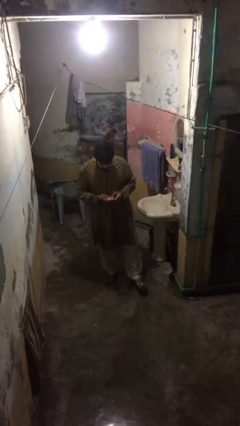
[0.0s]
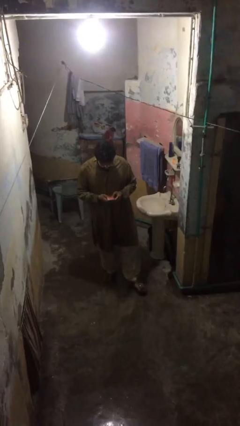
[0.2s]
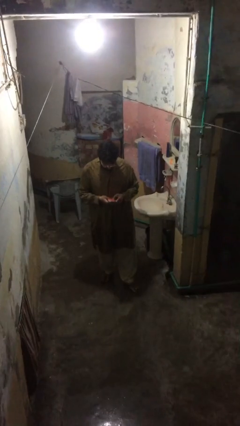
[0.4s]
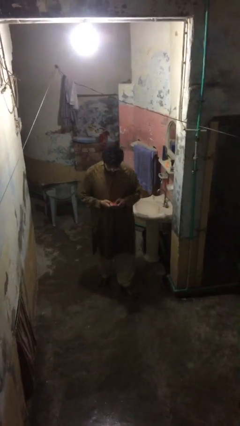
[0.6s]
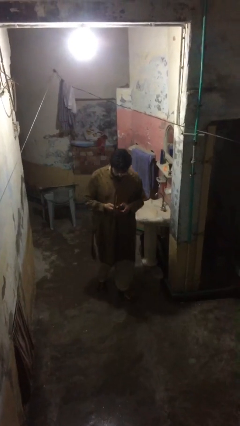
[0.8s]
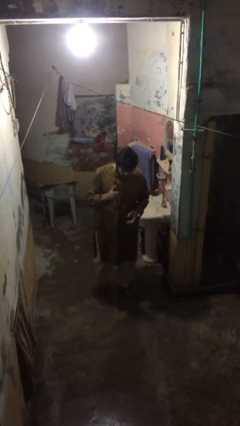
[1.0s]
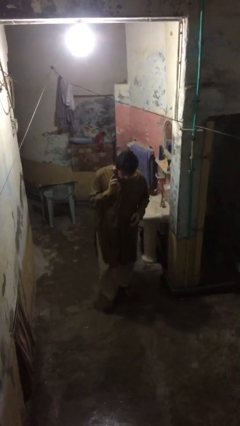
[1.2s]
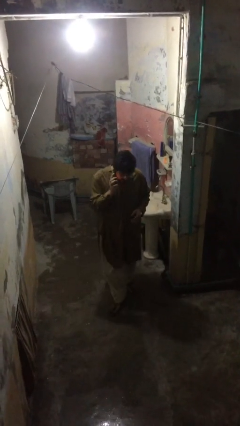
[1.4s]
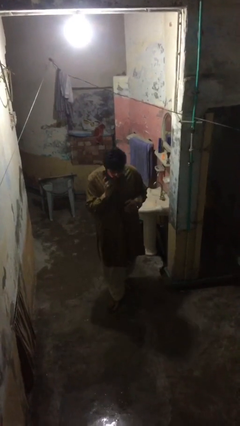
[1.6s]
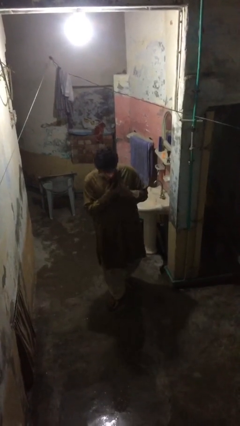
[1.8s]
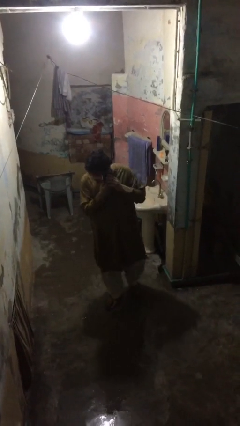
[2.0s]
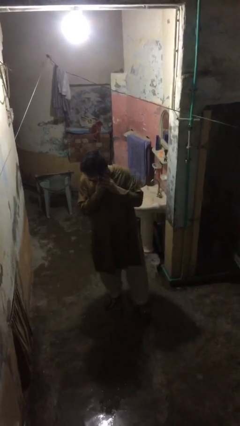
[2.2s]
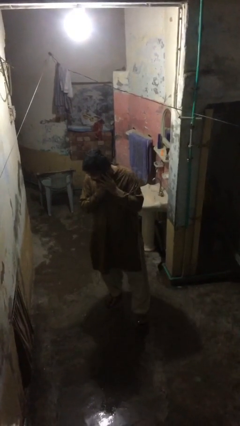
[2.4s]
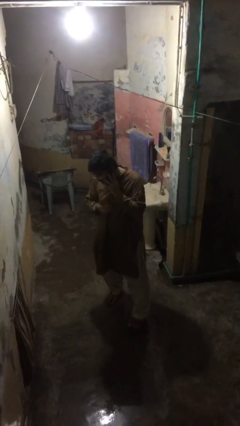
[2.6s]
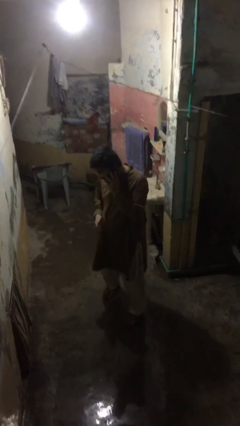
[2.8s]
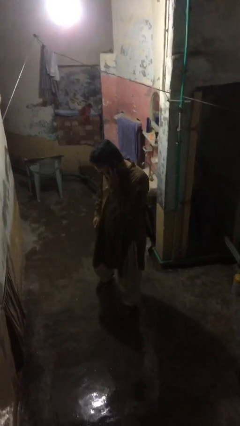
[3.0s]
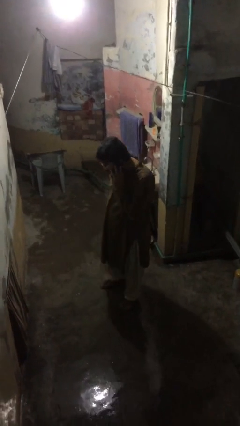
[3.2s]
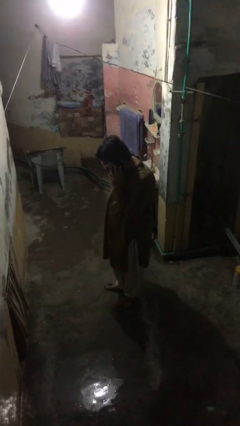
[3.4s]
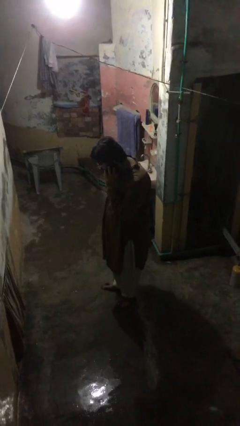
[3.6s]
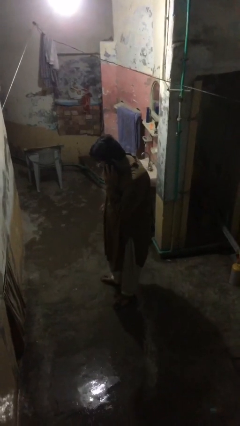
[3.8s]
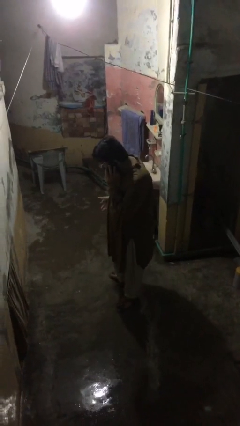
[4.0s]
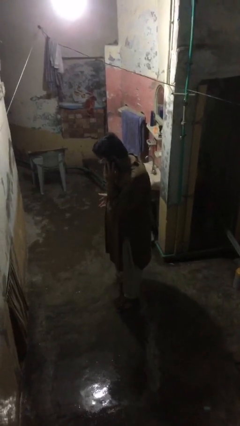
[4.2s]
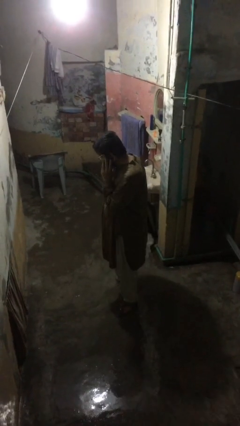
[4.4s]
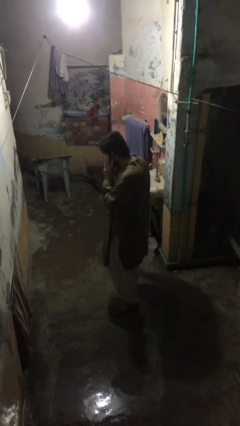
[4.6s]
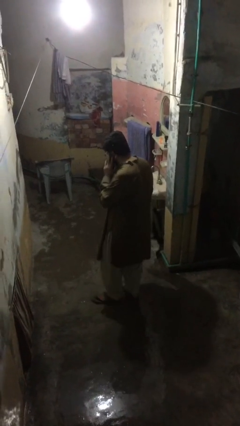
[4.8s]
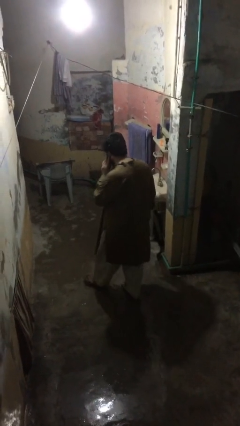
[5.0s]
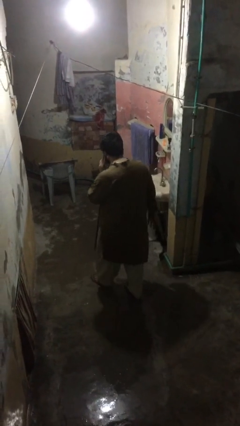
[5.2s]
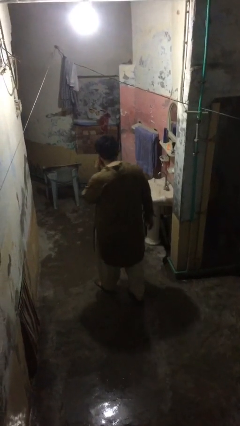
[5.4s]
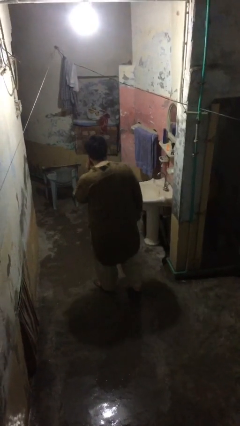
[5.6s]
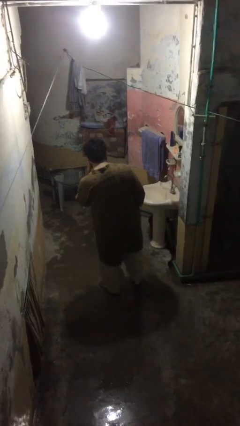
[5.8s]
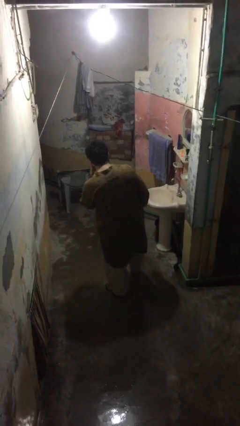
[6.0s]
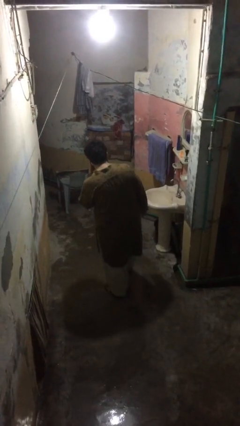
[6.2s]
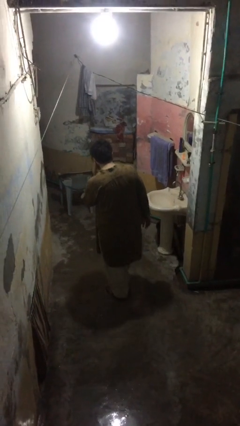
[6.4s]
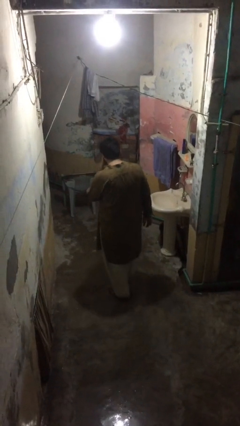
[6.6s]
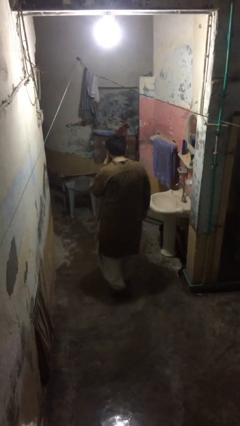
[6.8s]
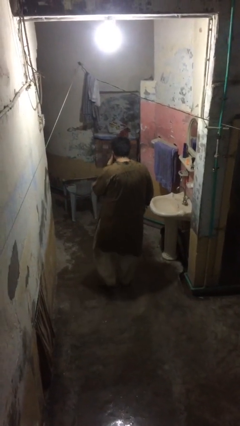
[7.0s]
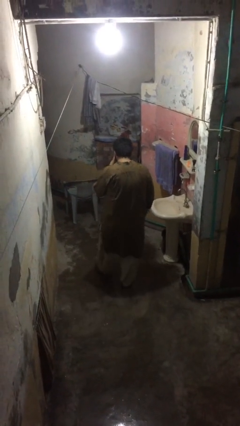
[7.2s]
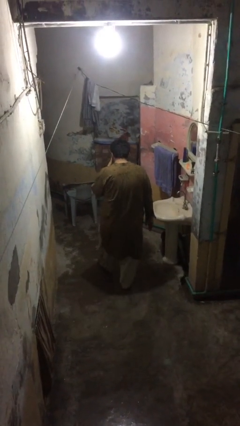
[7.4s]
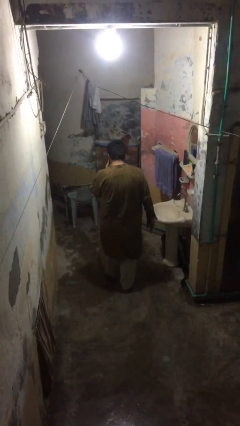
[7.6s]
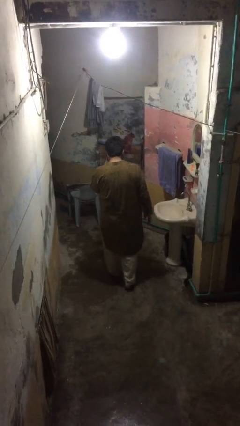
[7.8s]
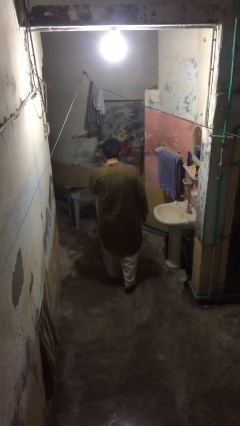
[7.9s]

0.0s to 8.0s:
person talks on phone

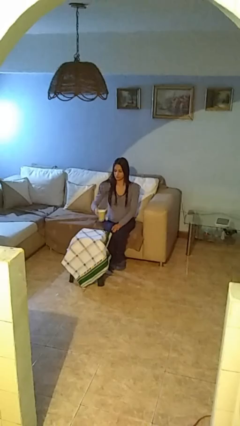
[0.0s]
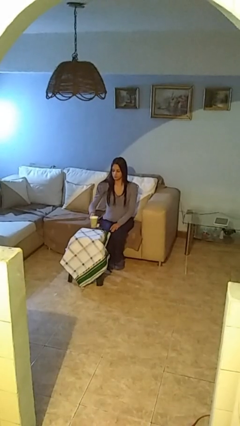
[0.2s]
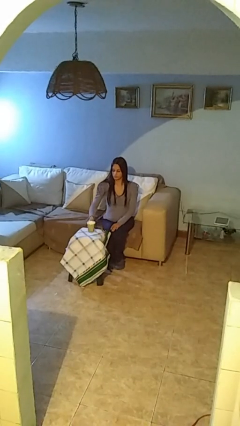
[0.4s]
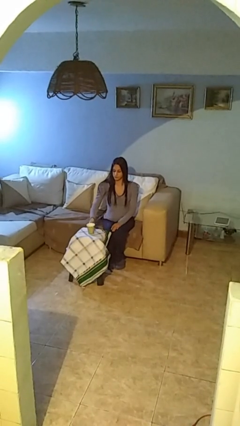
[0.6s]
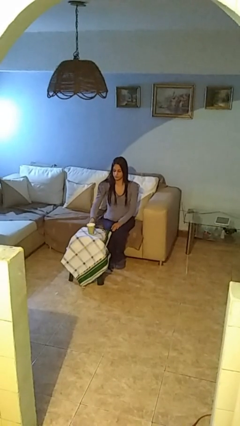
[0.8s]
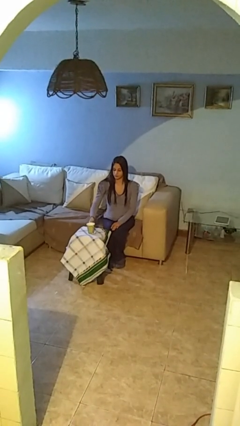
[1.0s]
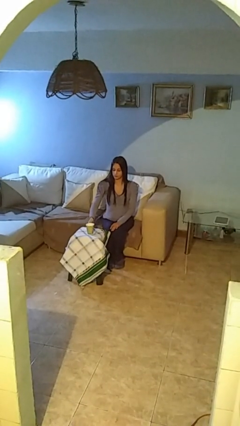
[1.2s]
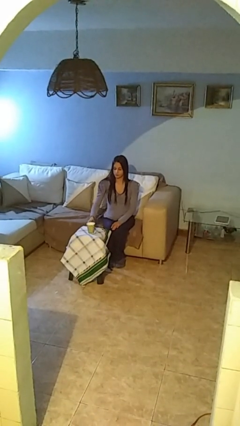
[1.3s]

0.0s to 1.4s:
person puts down object on table

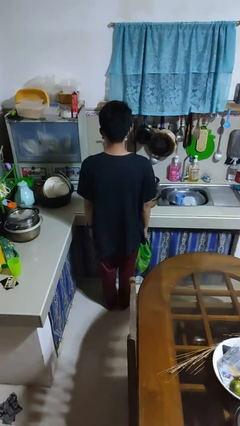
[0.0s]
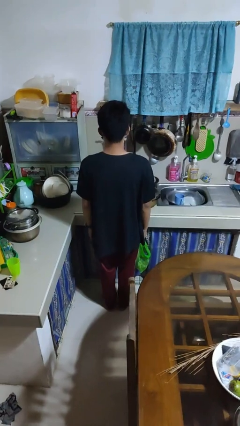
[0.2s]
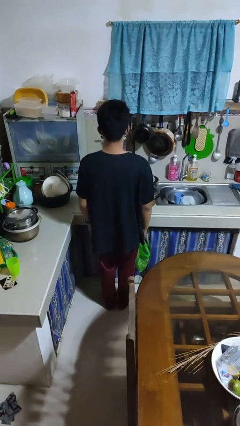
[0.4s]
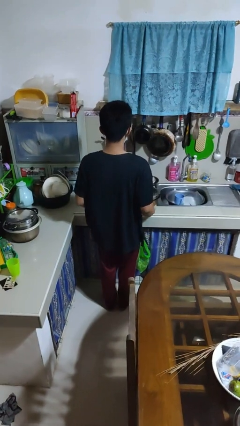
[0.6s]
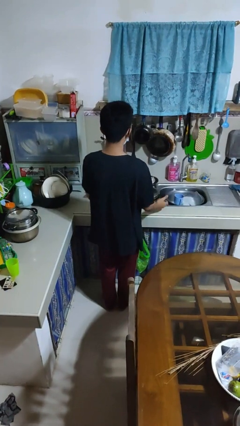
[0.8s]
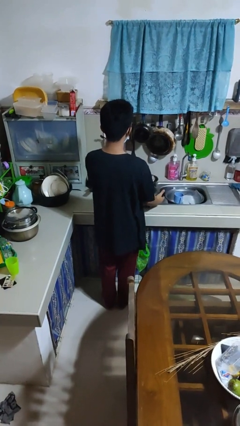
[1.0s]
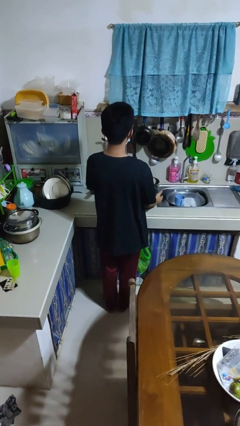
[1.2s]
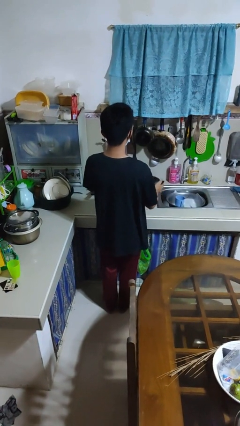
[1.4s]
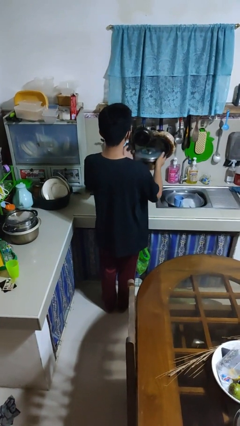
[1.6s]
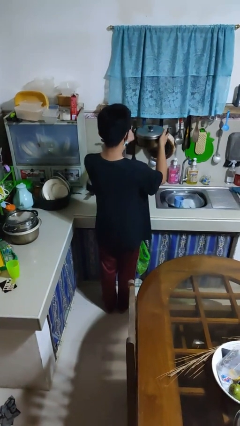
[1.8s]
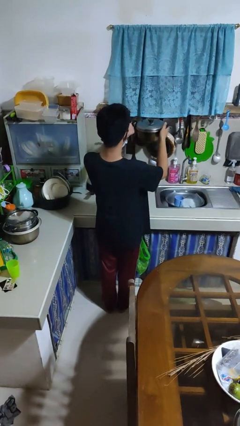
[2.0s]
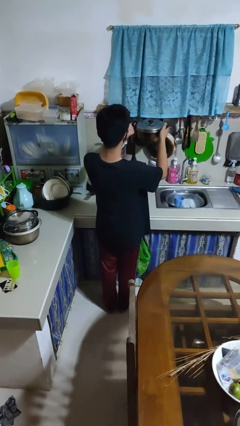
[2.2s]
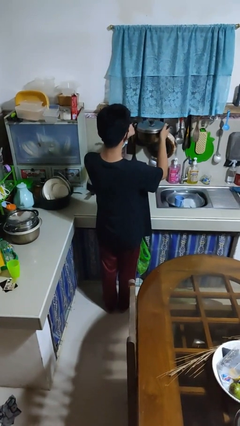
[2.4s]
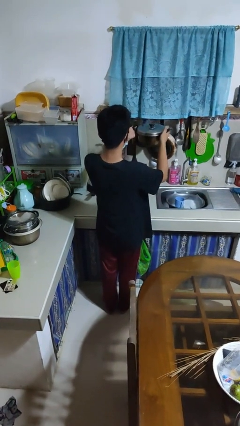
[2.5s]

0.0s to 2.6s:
person picks up object from countertop

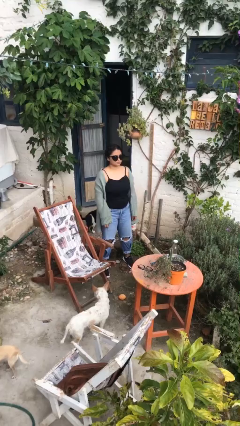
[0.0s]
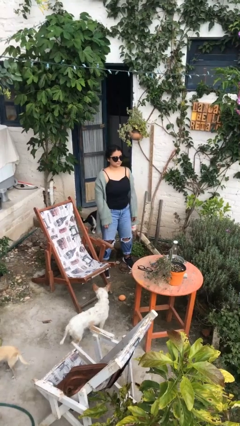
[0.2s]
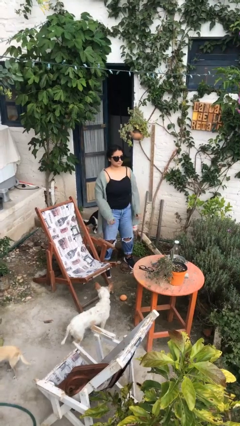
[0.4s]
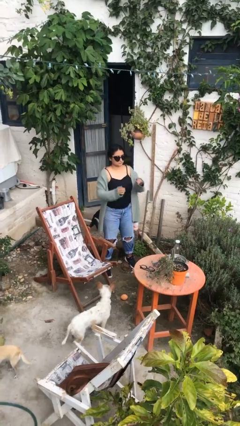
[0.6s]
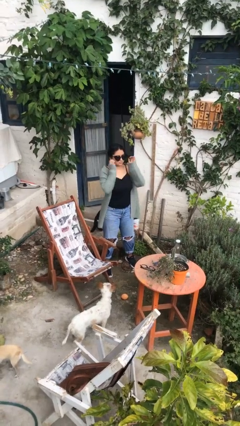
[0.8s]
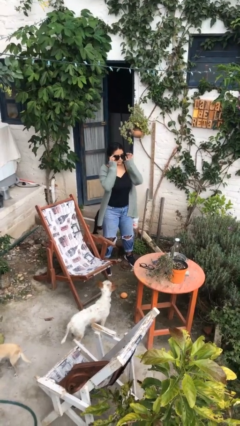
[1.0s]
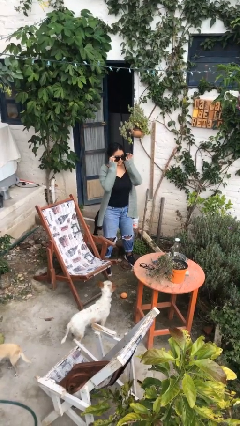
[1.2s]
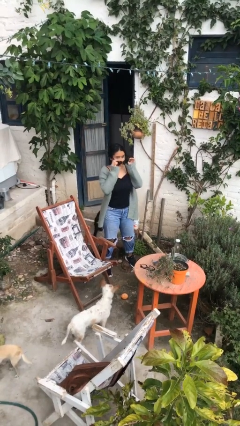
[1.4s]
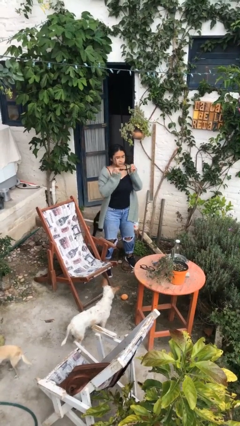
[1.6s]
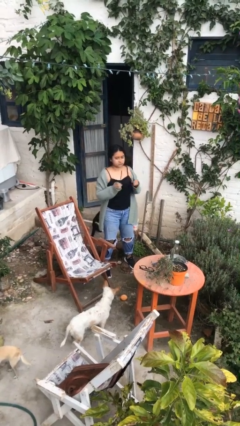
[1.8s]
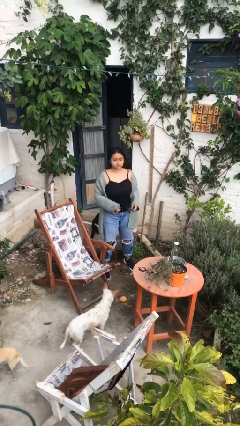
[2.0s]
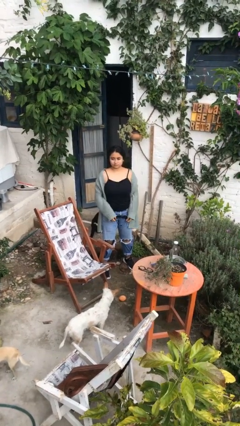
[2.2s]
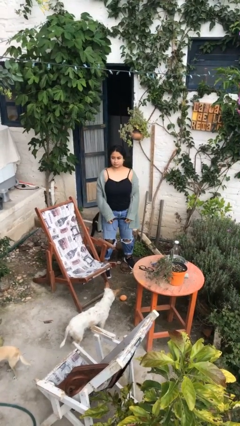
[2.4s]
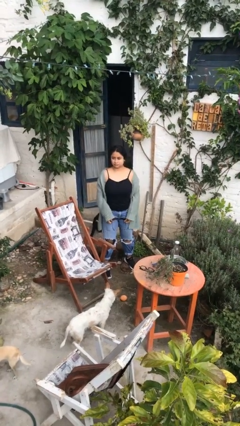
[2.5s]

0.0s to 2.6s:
person takes off sunglasses

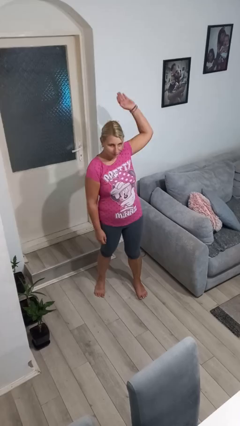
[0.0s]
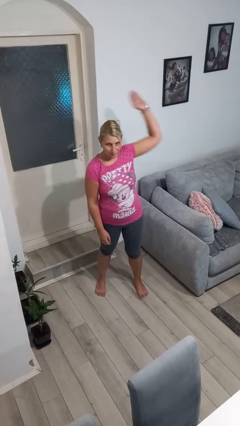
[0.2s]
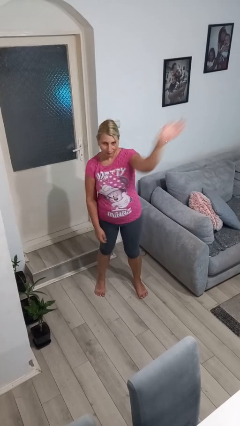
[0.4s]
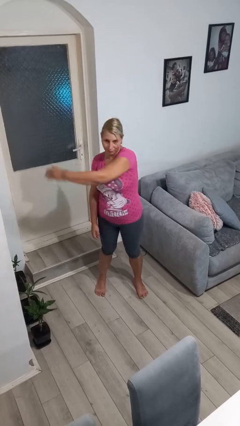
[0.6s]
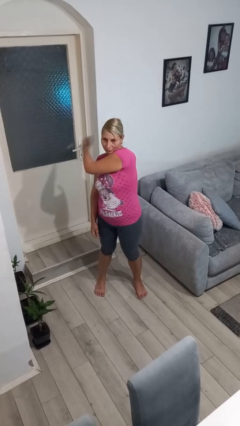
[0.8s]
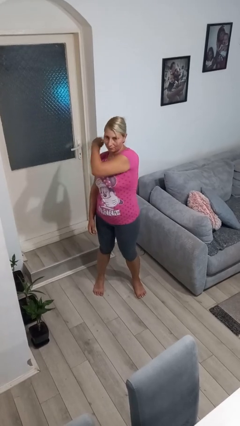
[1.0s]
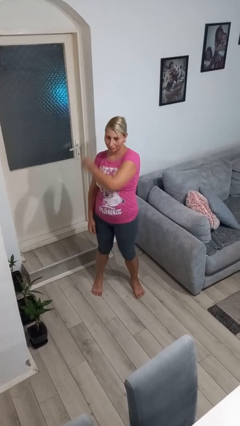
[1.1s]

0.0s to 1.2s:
person punches

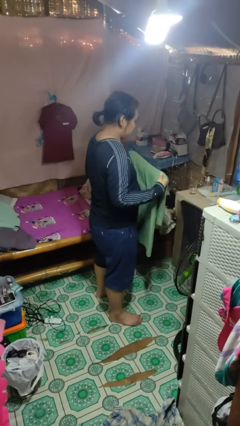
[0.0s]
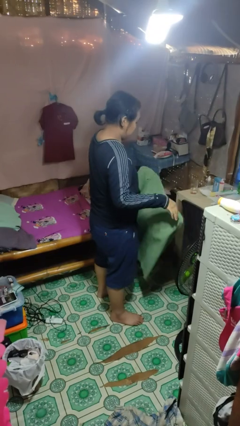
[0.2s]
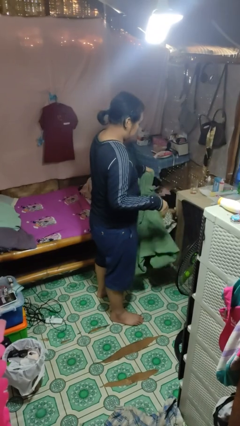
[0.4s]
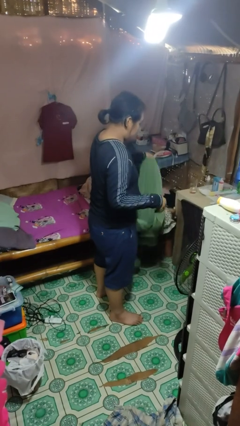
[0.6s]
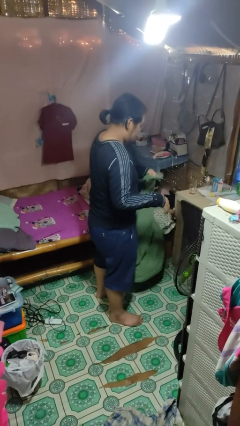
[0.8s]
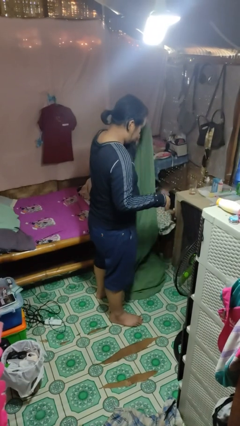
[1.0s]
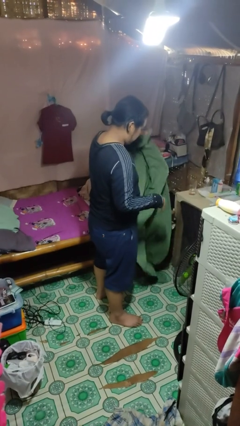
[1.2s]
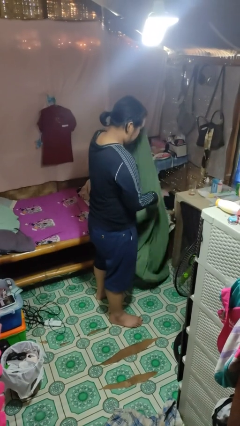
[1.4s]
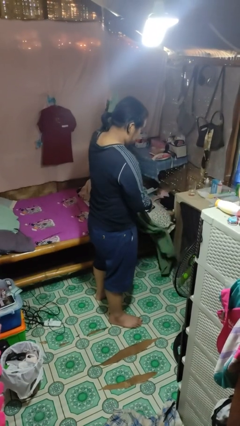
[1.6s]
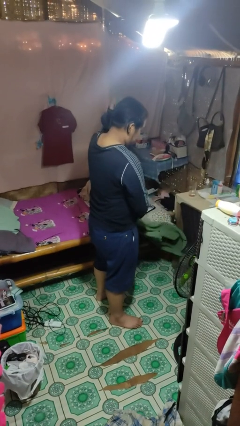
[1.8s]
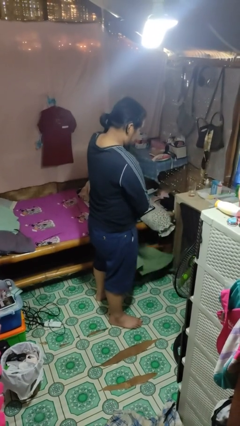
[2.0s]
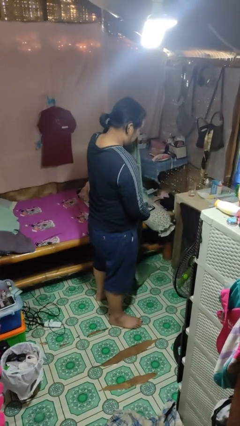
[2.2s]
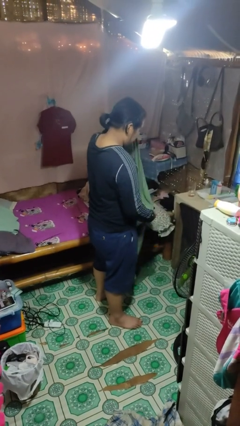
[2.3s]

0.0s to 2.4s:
person unfolds blanket
